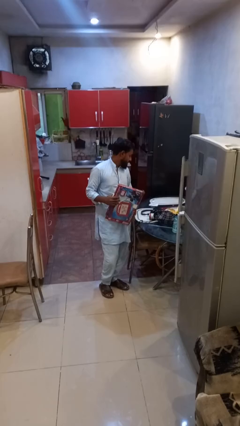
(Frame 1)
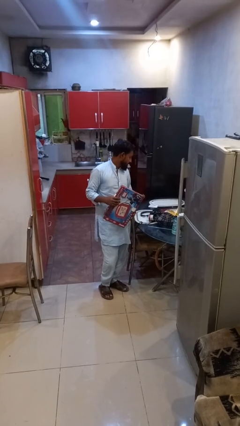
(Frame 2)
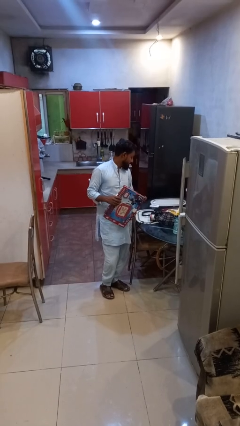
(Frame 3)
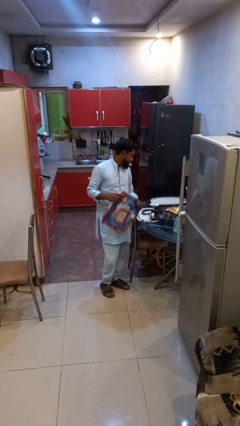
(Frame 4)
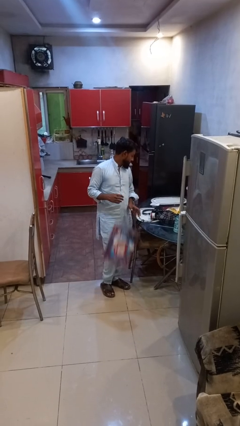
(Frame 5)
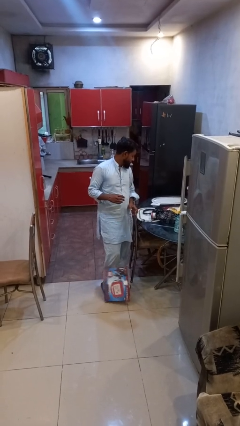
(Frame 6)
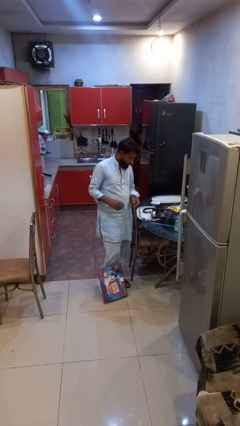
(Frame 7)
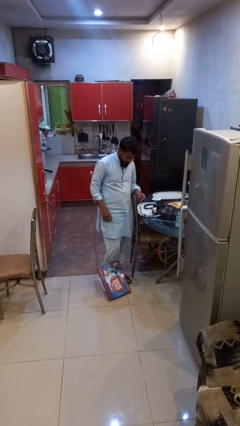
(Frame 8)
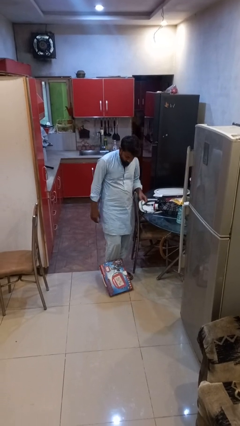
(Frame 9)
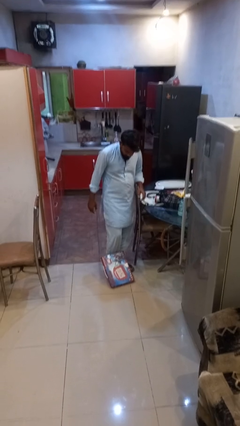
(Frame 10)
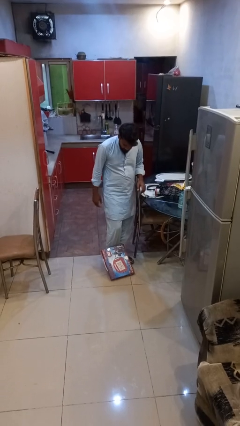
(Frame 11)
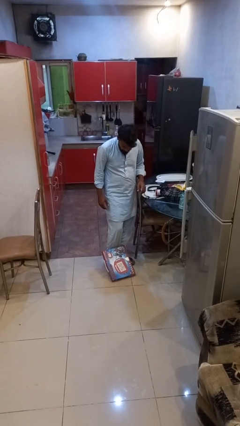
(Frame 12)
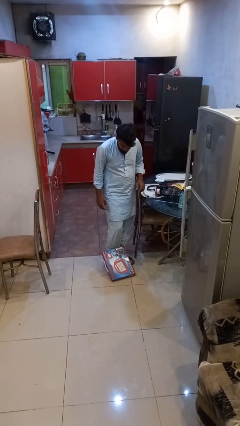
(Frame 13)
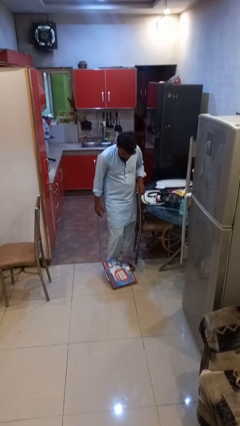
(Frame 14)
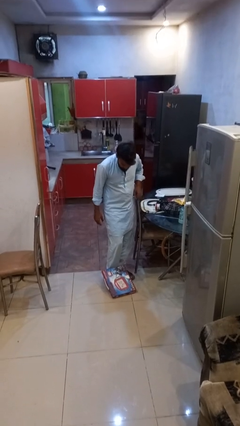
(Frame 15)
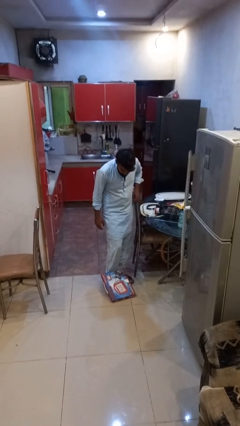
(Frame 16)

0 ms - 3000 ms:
person drops object

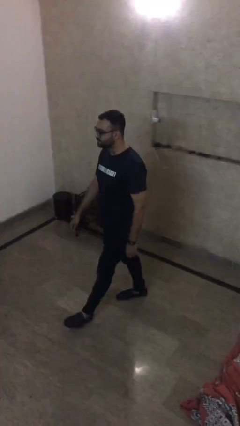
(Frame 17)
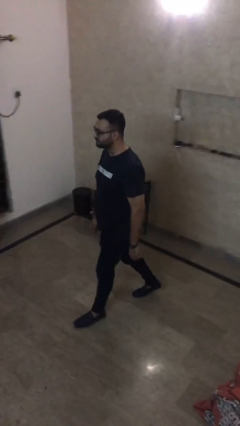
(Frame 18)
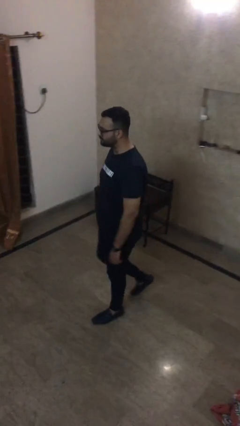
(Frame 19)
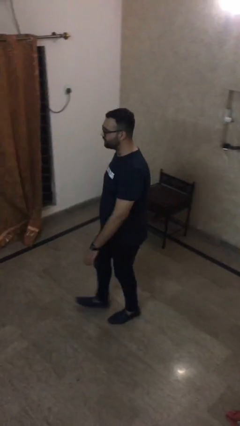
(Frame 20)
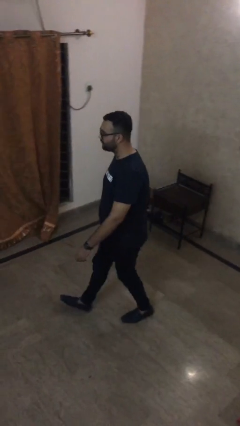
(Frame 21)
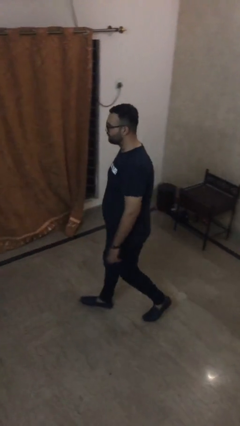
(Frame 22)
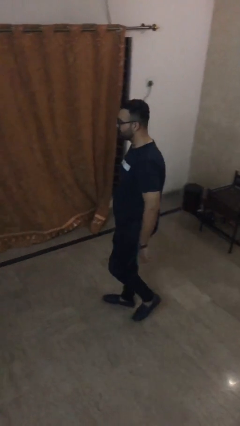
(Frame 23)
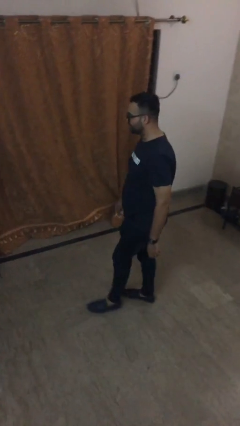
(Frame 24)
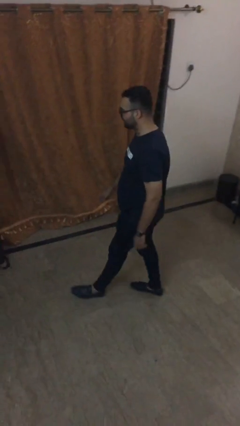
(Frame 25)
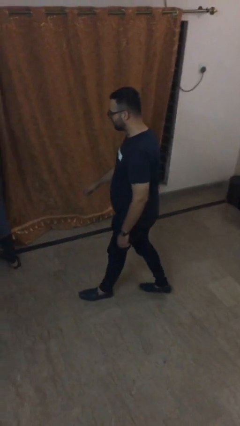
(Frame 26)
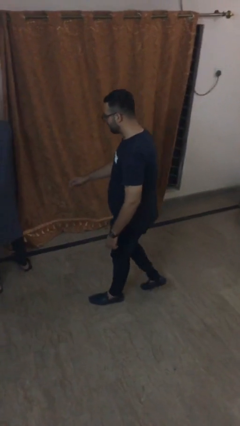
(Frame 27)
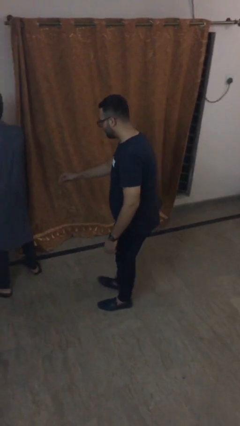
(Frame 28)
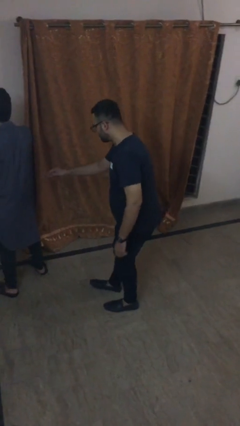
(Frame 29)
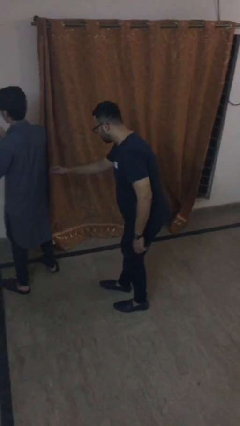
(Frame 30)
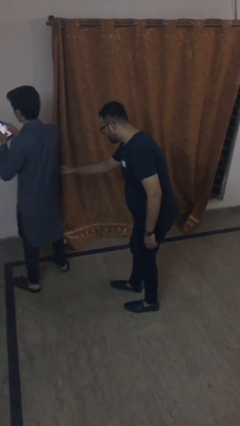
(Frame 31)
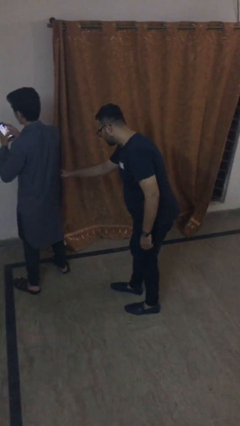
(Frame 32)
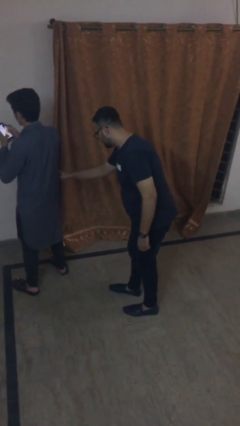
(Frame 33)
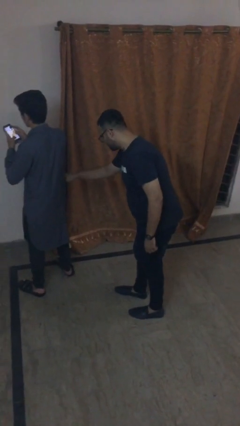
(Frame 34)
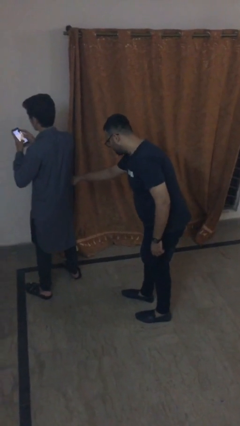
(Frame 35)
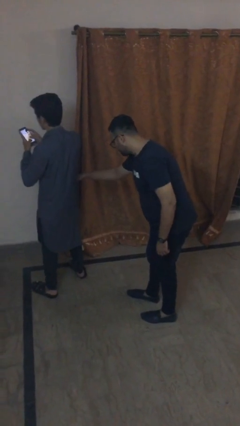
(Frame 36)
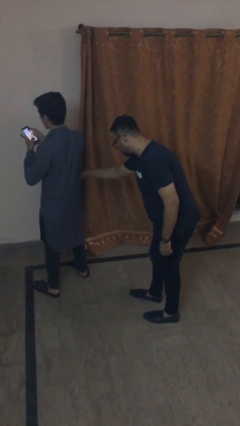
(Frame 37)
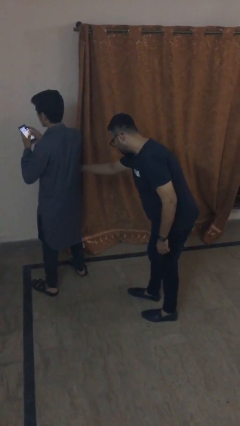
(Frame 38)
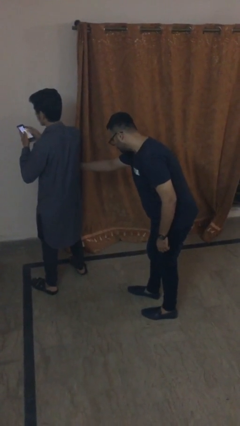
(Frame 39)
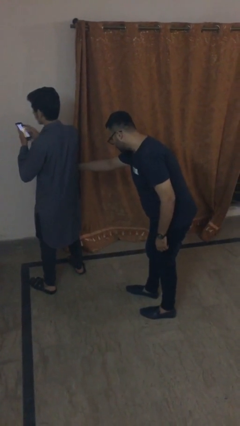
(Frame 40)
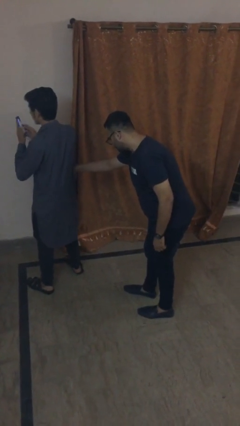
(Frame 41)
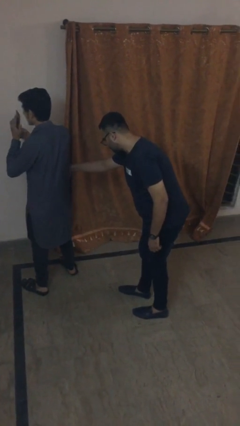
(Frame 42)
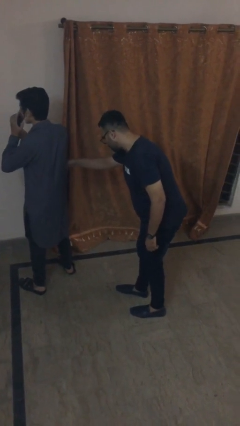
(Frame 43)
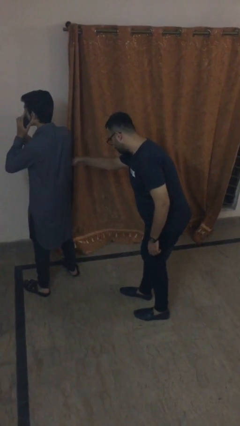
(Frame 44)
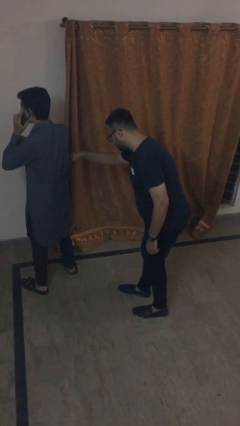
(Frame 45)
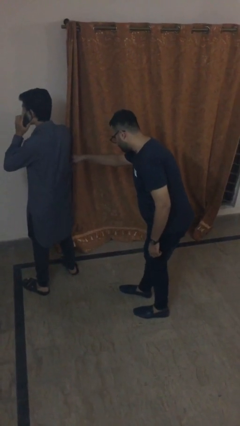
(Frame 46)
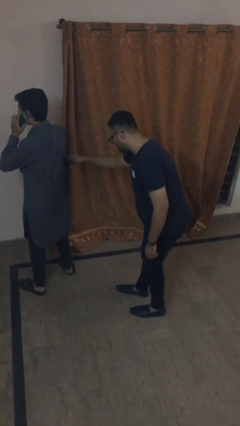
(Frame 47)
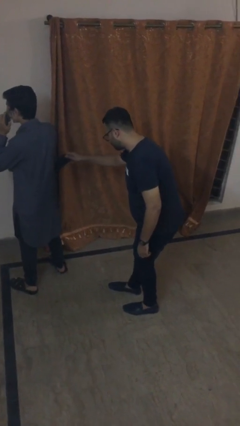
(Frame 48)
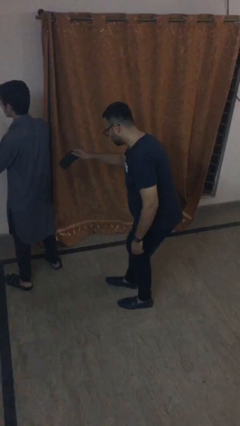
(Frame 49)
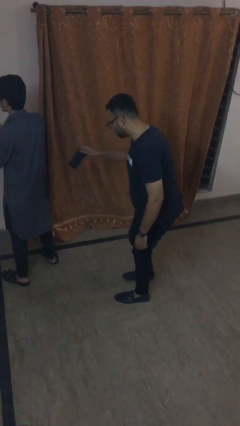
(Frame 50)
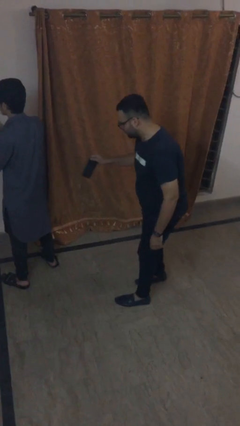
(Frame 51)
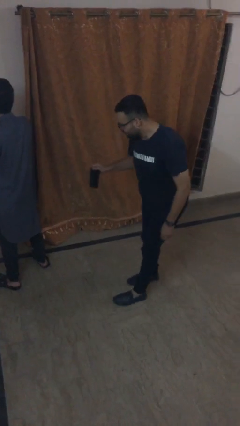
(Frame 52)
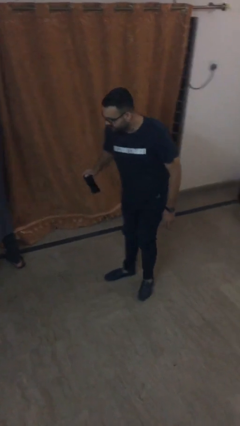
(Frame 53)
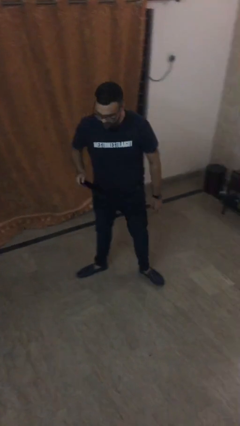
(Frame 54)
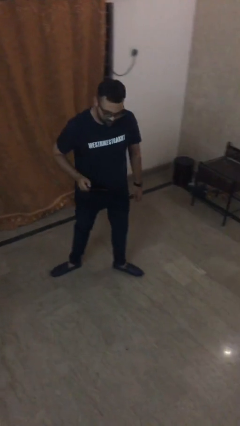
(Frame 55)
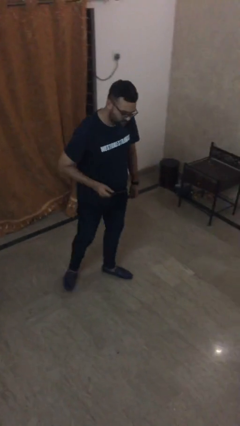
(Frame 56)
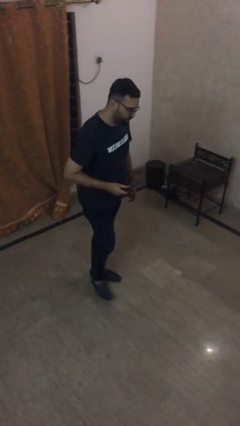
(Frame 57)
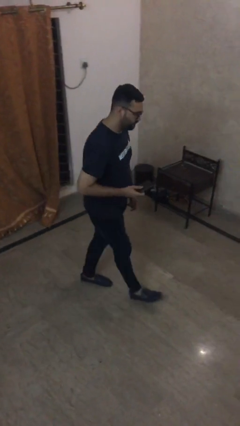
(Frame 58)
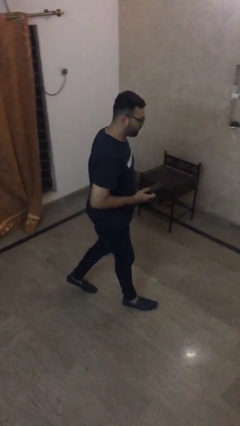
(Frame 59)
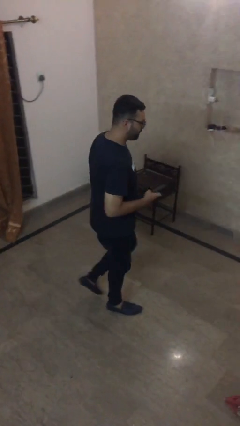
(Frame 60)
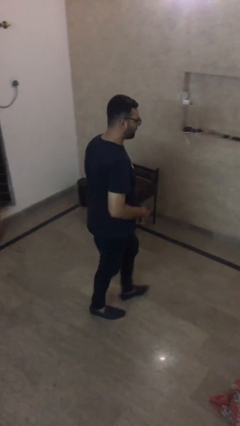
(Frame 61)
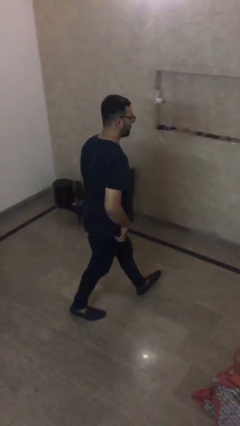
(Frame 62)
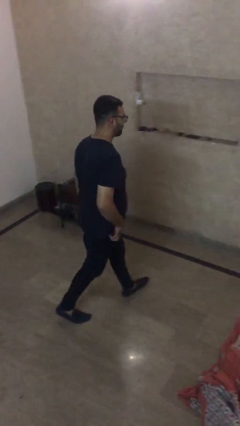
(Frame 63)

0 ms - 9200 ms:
person steals object from person

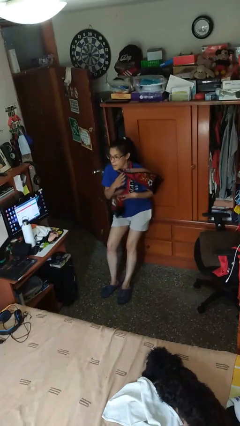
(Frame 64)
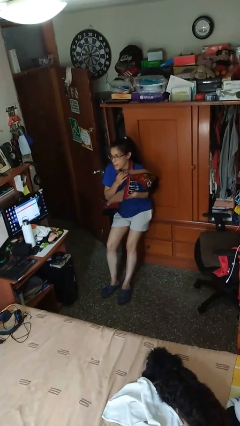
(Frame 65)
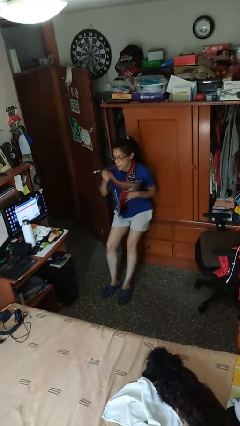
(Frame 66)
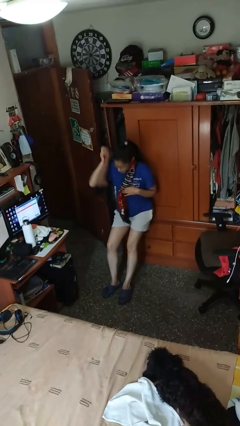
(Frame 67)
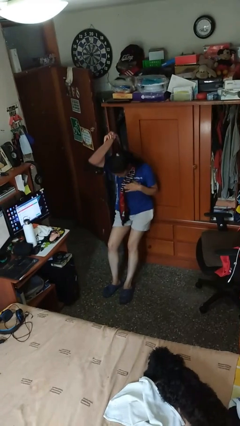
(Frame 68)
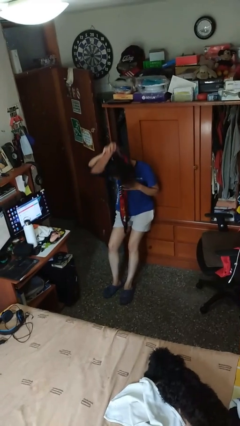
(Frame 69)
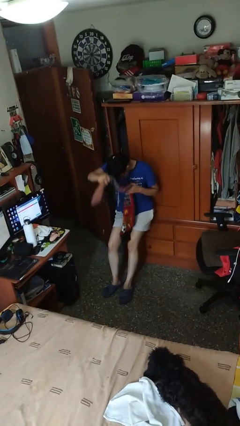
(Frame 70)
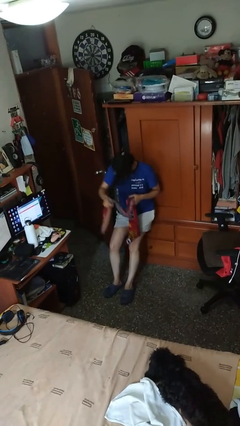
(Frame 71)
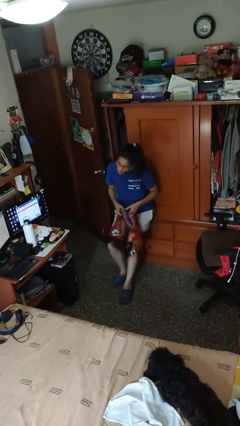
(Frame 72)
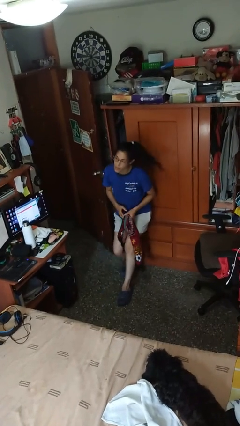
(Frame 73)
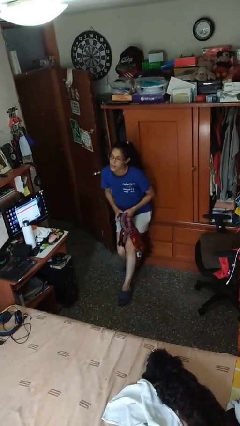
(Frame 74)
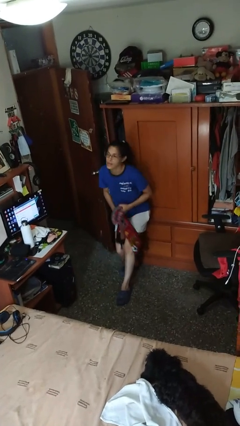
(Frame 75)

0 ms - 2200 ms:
person takes off scarf

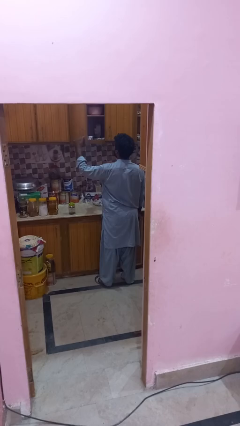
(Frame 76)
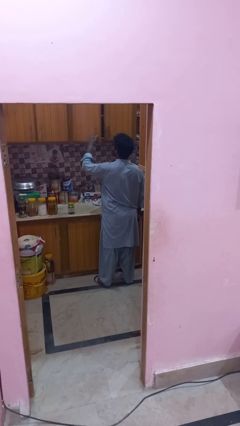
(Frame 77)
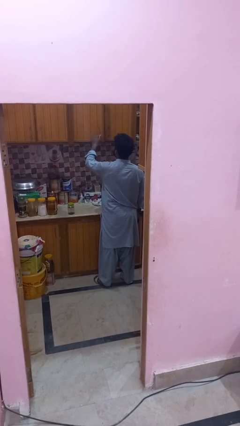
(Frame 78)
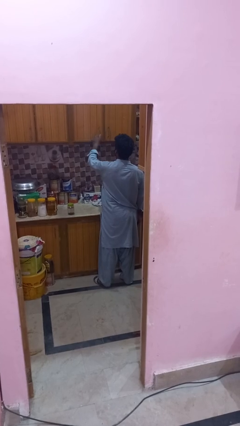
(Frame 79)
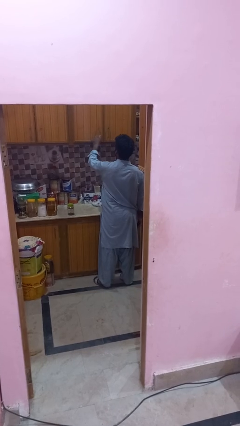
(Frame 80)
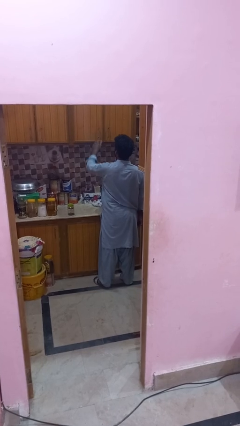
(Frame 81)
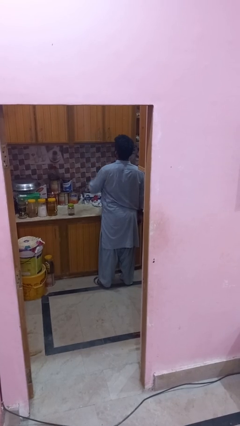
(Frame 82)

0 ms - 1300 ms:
person closes cabinet

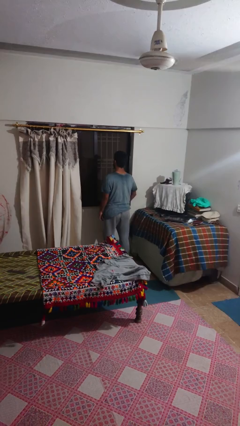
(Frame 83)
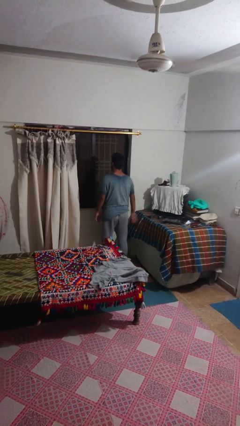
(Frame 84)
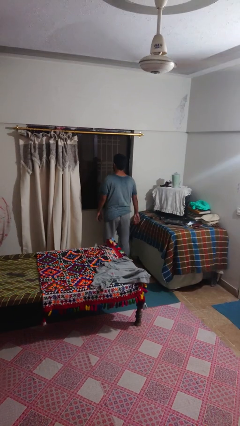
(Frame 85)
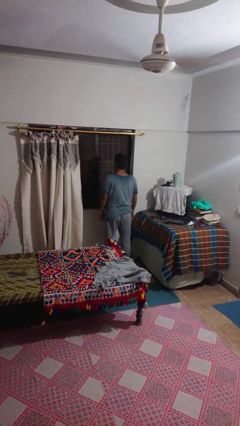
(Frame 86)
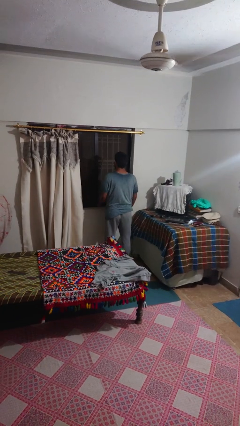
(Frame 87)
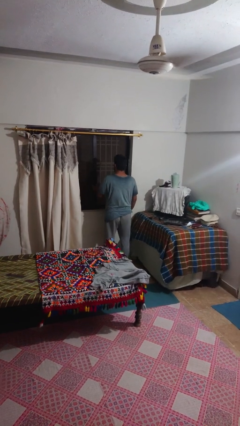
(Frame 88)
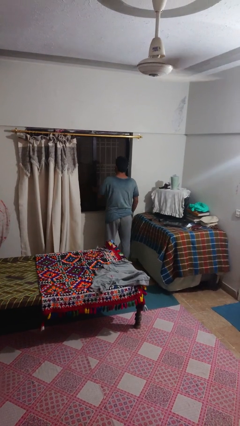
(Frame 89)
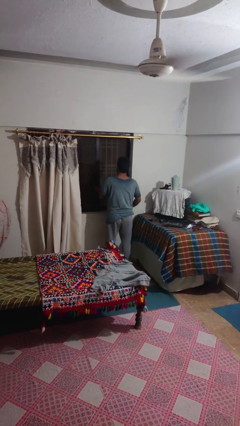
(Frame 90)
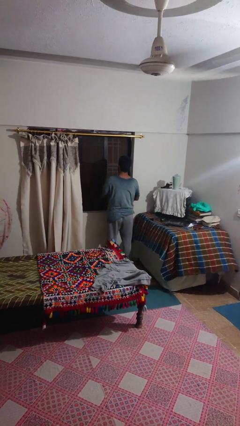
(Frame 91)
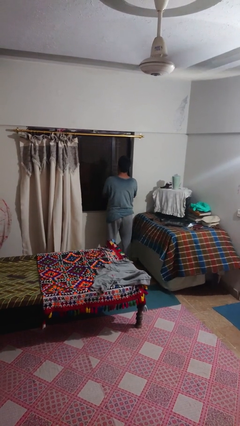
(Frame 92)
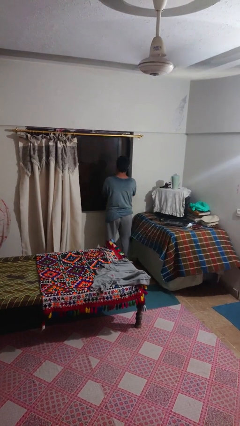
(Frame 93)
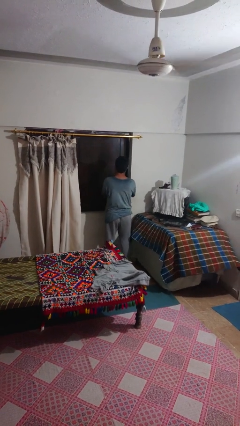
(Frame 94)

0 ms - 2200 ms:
person closes home window
